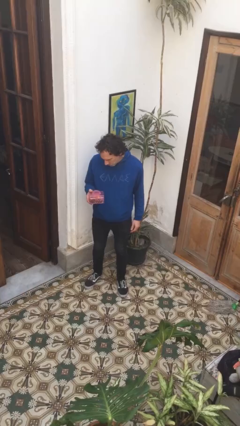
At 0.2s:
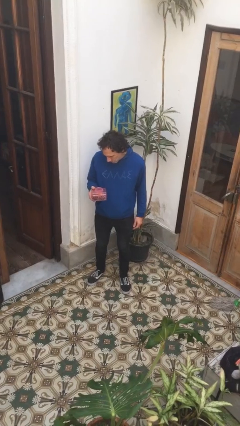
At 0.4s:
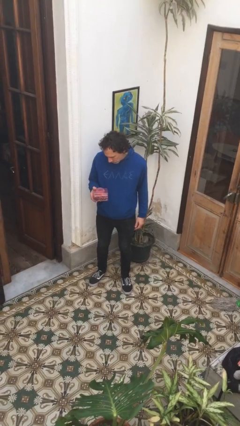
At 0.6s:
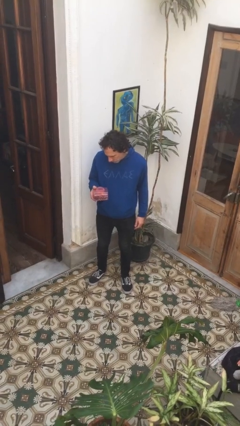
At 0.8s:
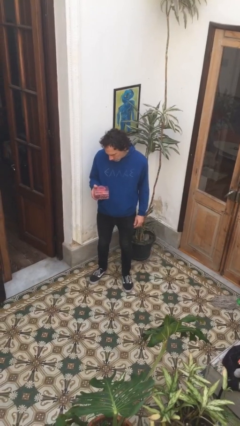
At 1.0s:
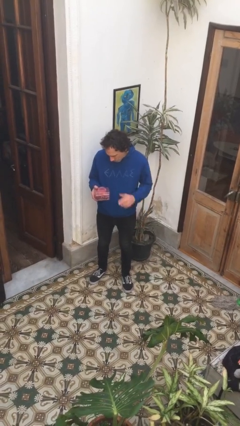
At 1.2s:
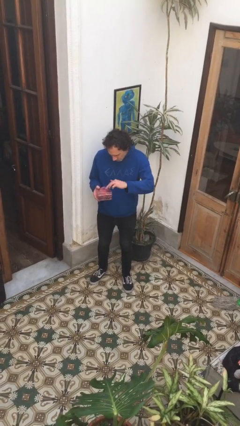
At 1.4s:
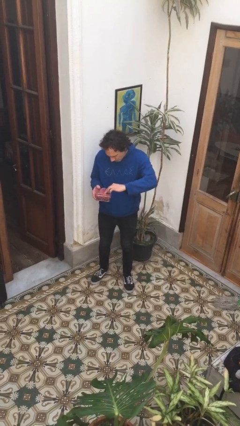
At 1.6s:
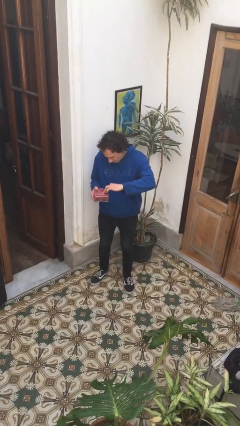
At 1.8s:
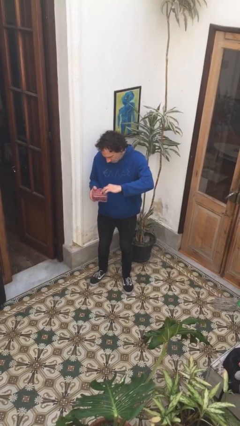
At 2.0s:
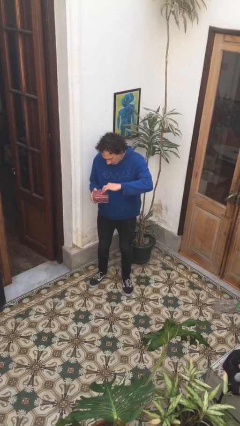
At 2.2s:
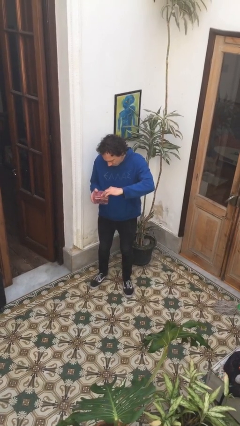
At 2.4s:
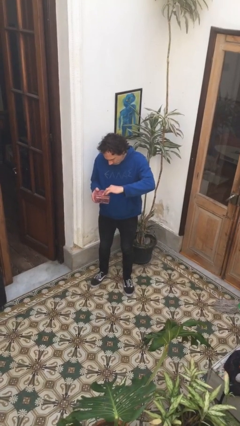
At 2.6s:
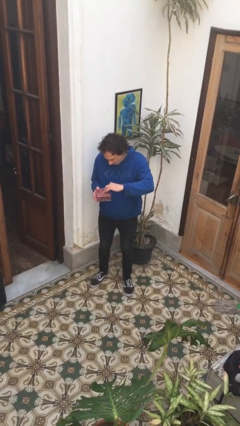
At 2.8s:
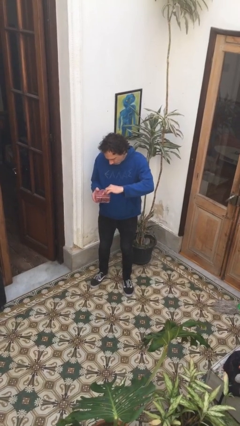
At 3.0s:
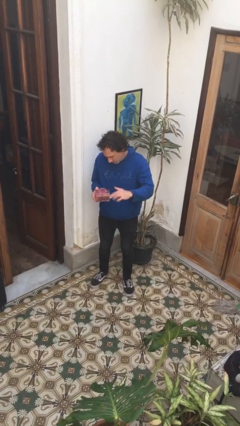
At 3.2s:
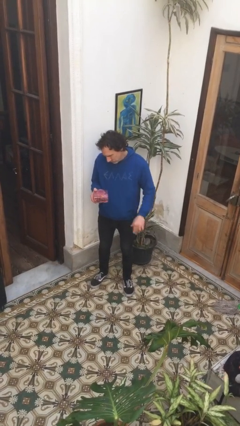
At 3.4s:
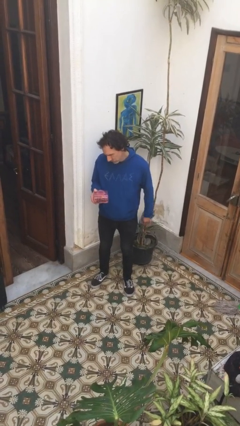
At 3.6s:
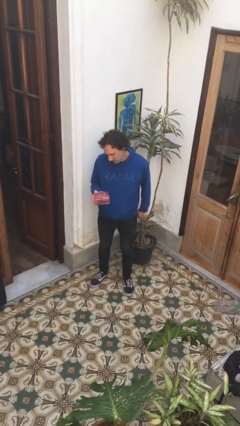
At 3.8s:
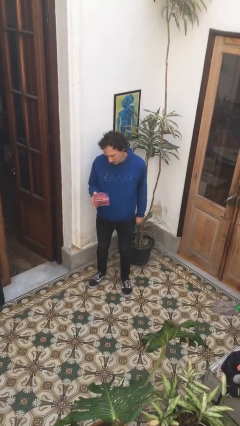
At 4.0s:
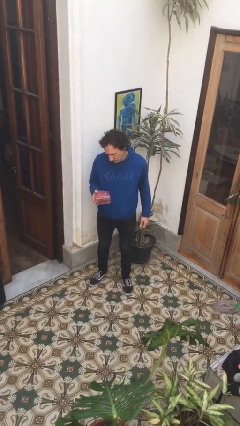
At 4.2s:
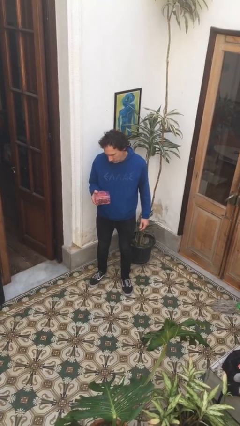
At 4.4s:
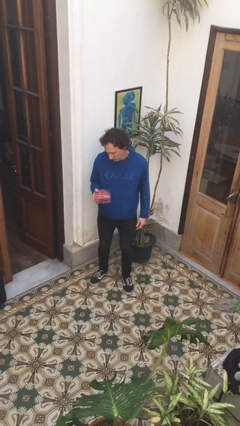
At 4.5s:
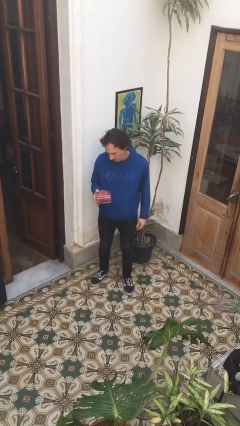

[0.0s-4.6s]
person taps object with finger

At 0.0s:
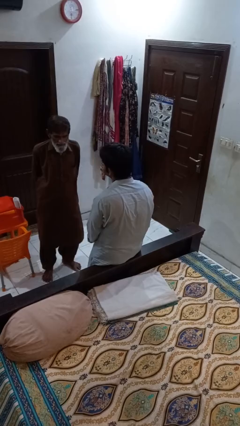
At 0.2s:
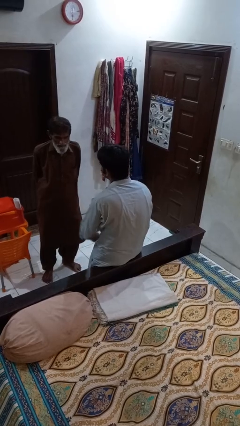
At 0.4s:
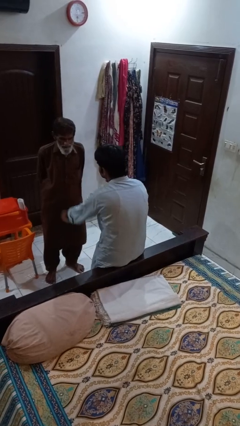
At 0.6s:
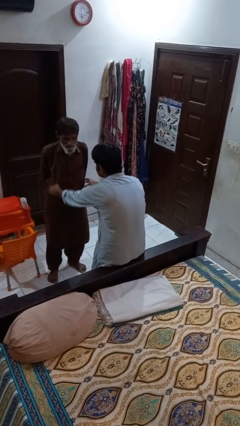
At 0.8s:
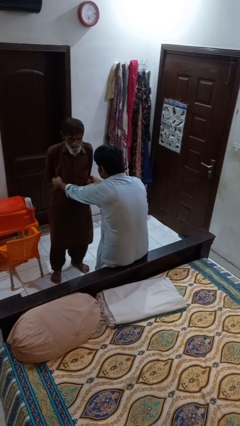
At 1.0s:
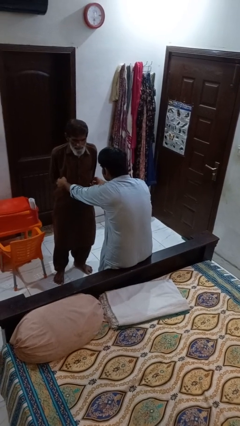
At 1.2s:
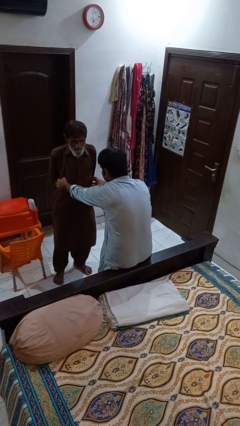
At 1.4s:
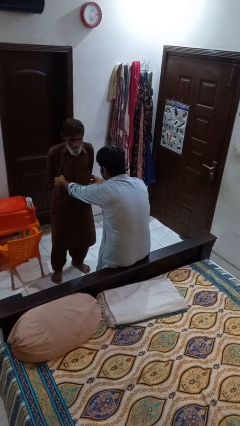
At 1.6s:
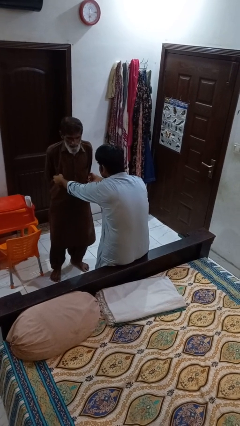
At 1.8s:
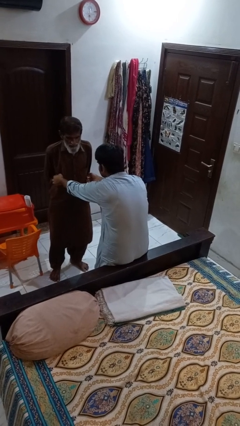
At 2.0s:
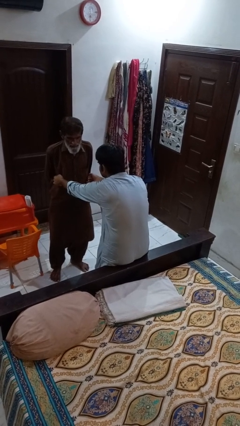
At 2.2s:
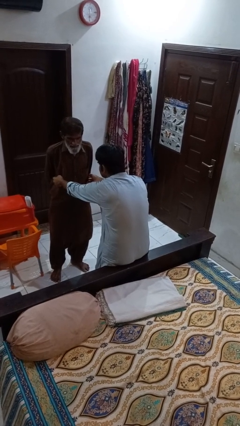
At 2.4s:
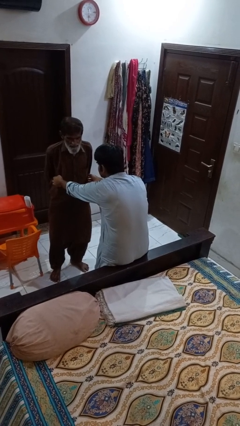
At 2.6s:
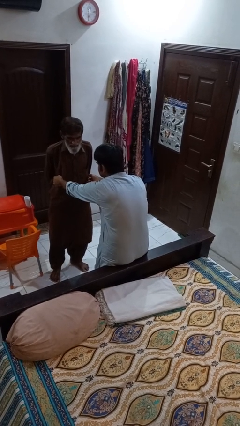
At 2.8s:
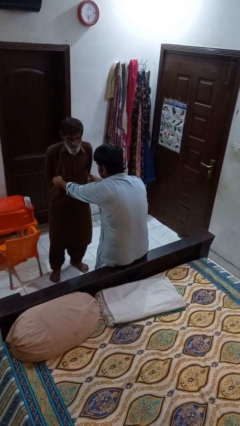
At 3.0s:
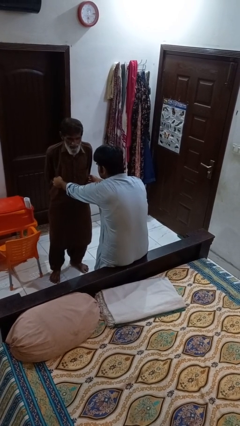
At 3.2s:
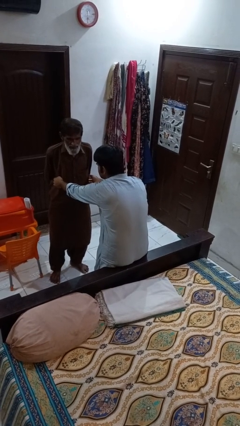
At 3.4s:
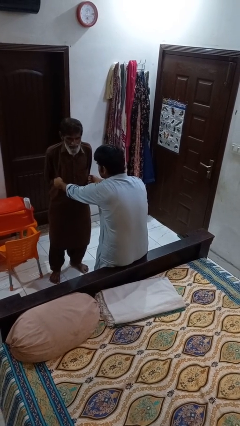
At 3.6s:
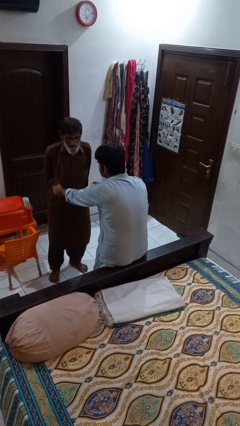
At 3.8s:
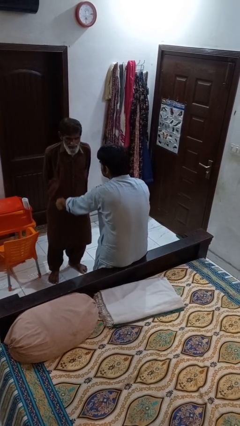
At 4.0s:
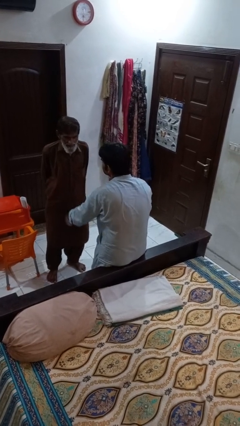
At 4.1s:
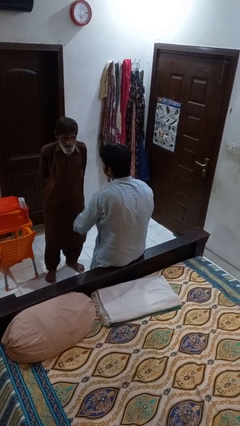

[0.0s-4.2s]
person tickles person

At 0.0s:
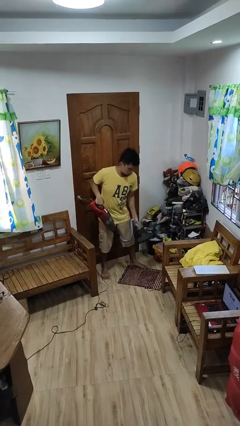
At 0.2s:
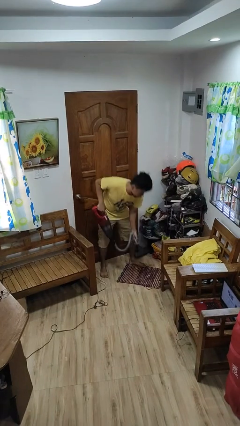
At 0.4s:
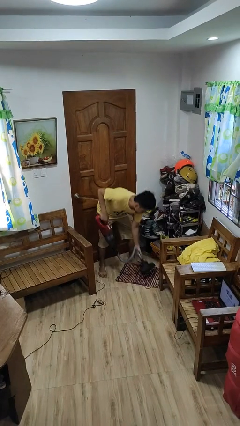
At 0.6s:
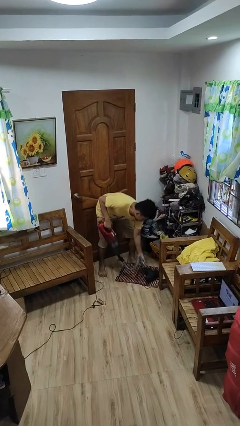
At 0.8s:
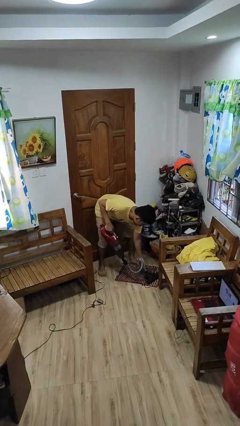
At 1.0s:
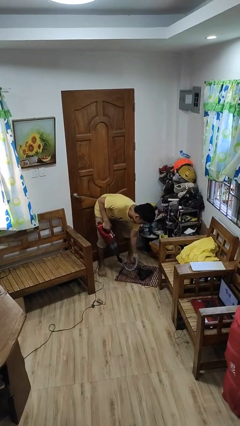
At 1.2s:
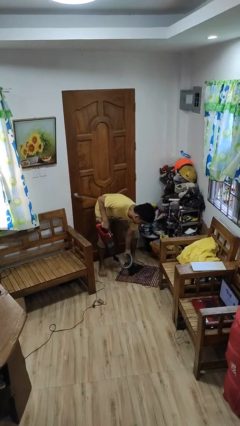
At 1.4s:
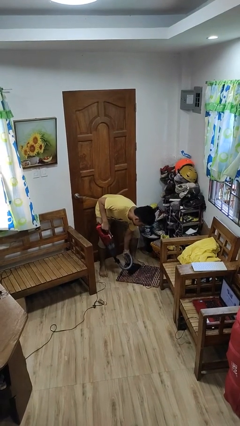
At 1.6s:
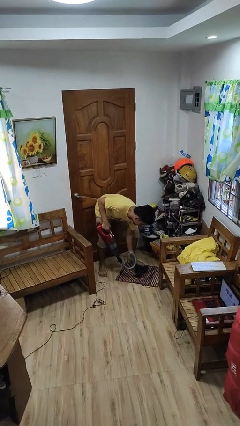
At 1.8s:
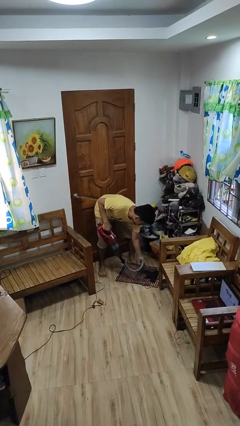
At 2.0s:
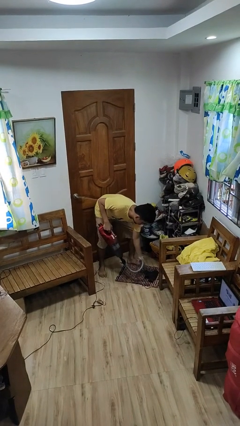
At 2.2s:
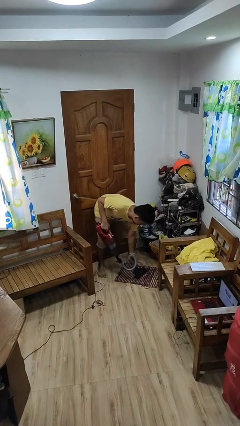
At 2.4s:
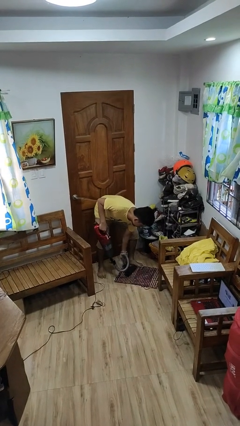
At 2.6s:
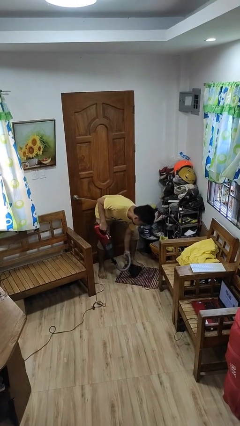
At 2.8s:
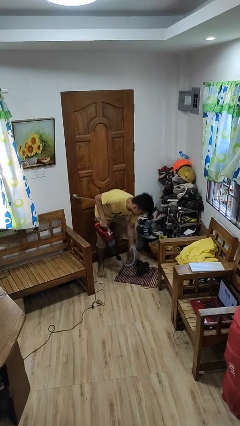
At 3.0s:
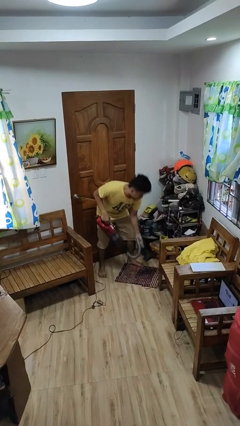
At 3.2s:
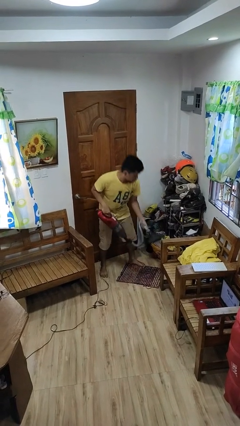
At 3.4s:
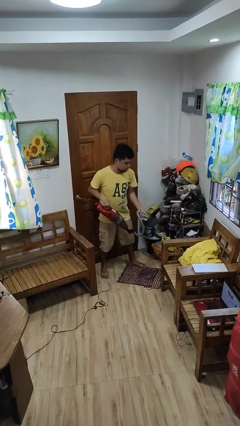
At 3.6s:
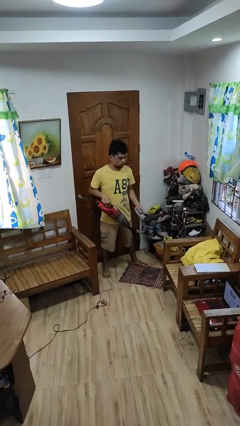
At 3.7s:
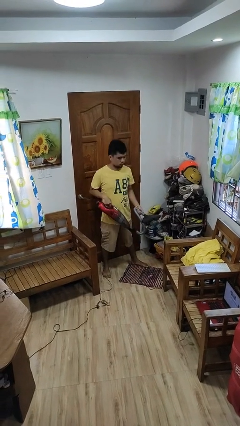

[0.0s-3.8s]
person vacuums carpet

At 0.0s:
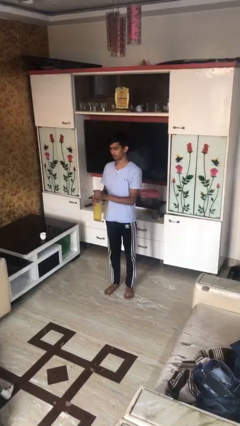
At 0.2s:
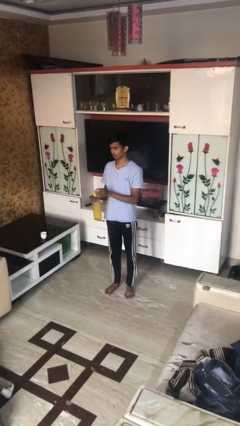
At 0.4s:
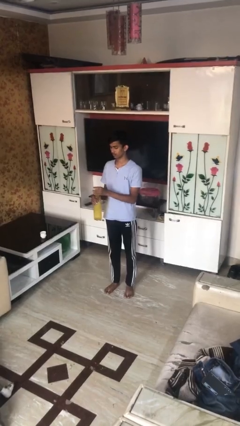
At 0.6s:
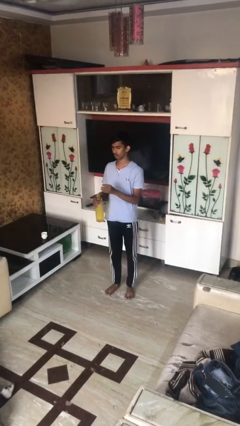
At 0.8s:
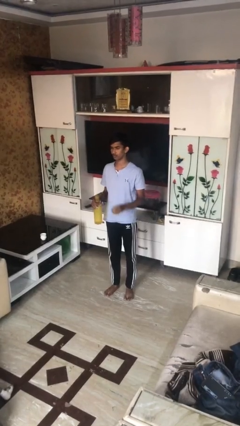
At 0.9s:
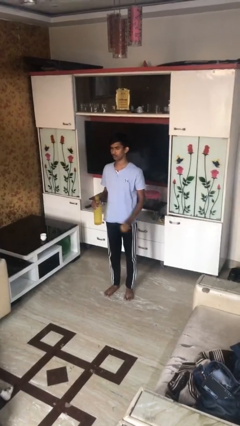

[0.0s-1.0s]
person unscrews lid from bottle

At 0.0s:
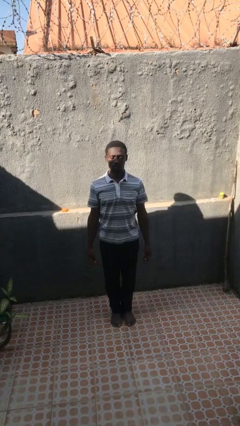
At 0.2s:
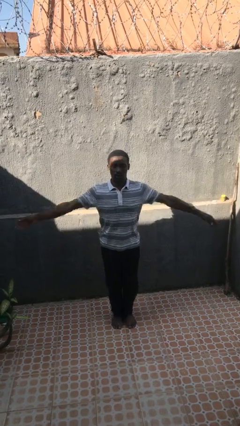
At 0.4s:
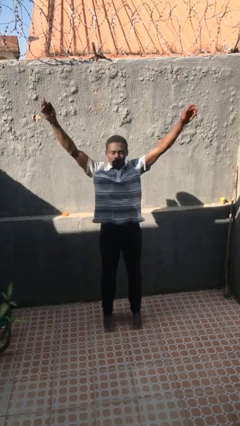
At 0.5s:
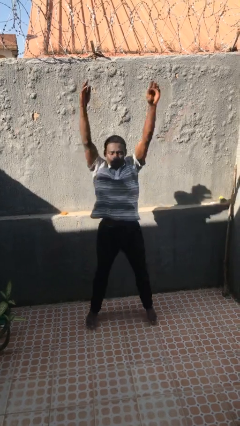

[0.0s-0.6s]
person exercises with jumping jacks

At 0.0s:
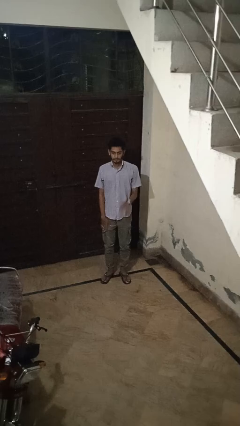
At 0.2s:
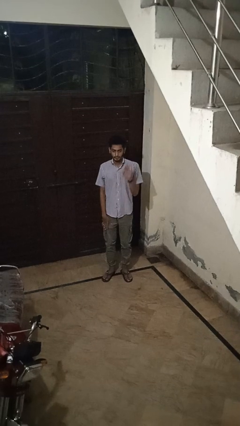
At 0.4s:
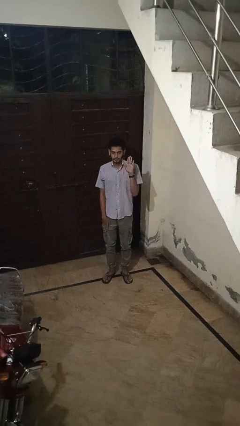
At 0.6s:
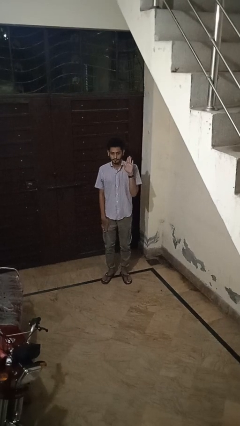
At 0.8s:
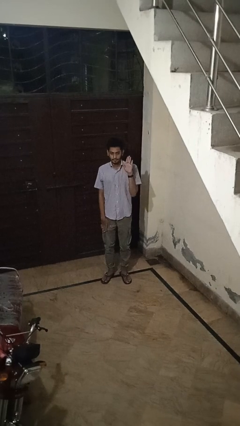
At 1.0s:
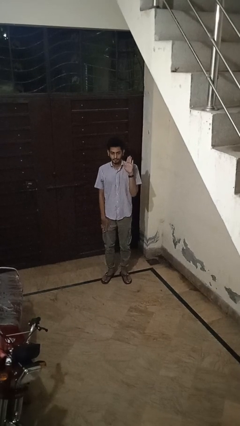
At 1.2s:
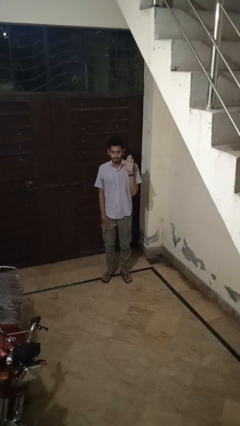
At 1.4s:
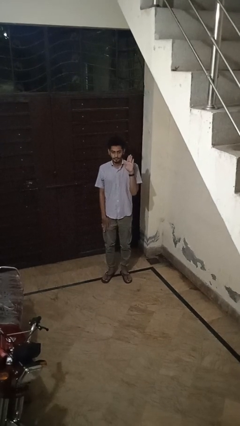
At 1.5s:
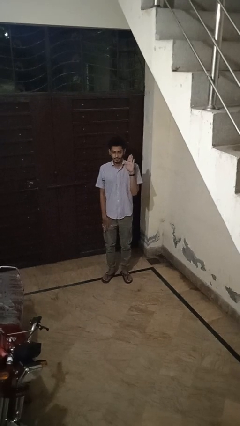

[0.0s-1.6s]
person gestures raise hand

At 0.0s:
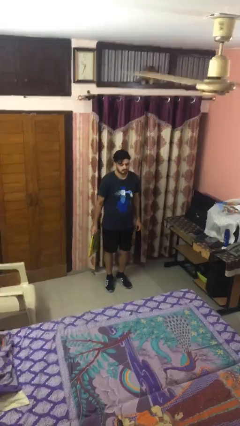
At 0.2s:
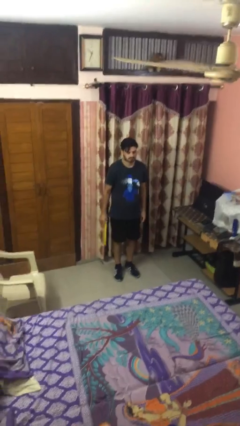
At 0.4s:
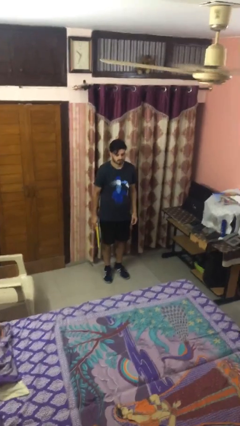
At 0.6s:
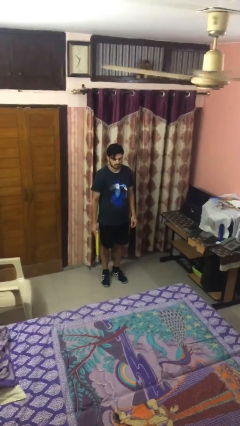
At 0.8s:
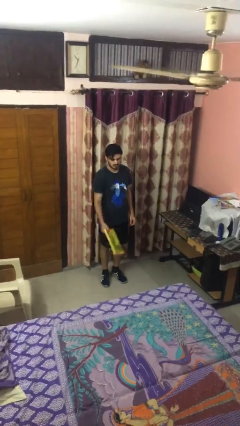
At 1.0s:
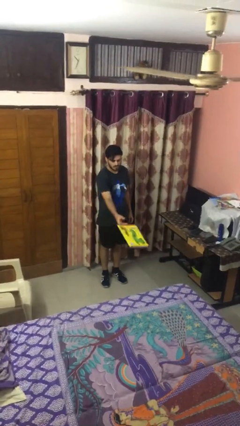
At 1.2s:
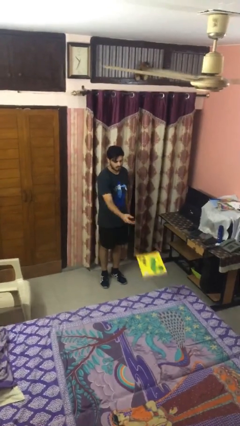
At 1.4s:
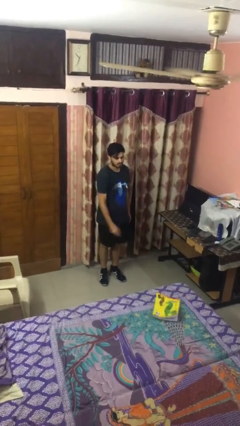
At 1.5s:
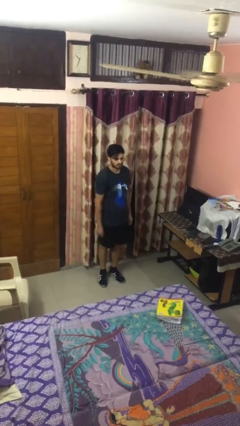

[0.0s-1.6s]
person throws object on bed
